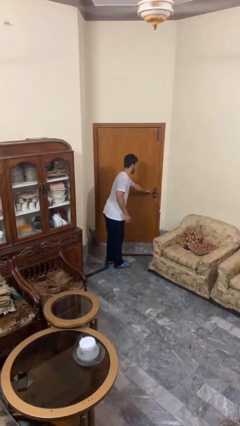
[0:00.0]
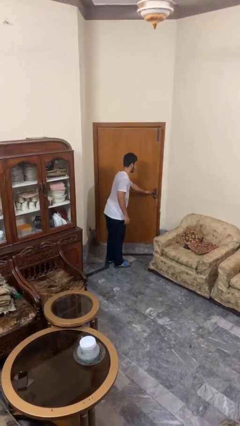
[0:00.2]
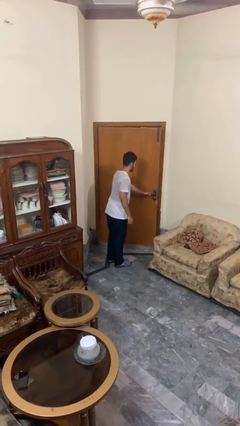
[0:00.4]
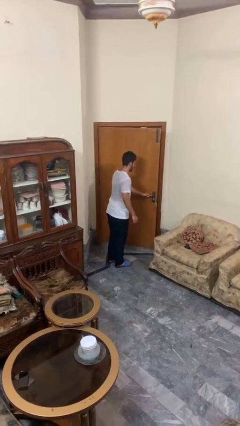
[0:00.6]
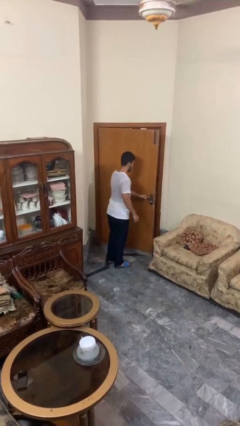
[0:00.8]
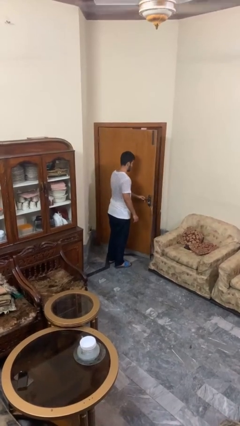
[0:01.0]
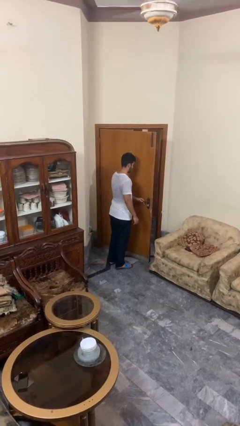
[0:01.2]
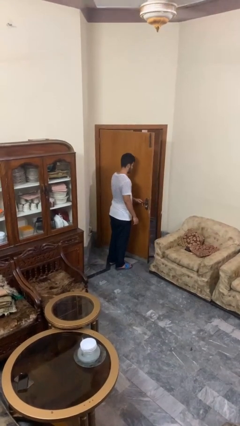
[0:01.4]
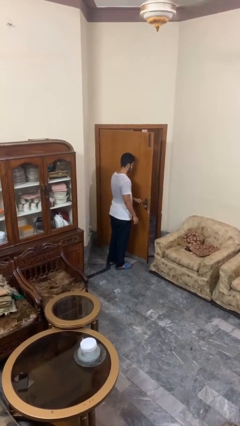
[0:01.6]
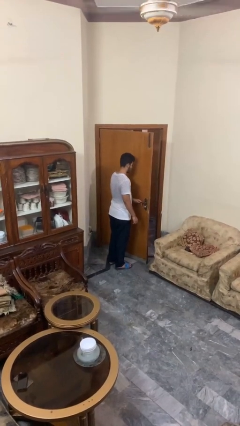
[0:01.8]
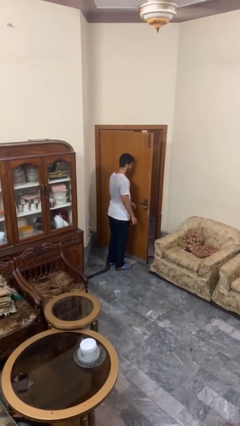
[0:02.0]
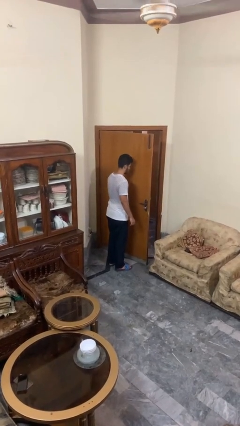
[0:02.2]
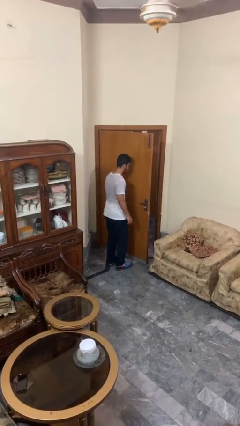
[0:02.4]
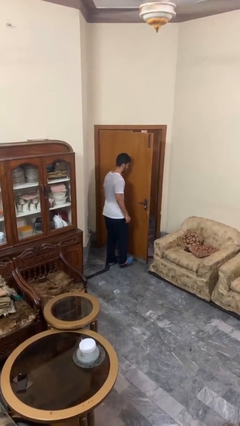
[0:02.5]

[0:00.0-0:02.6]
person opens facility door

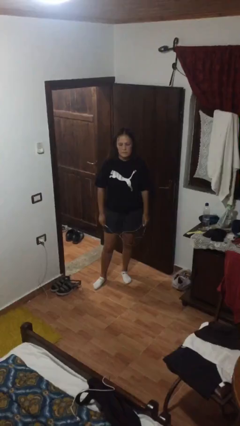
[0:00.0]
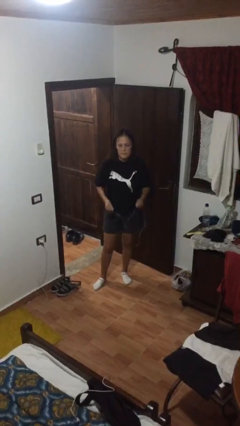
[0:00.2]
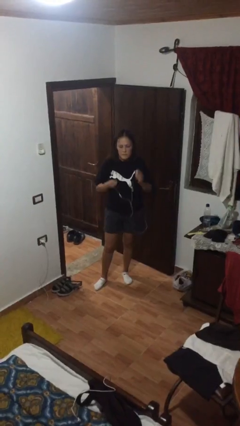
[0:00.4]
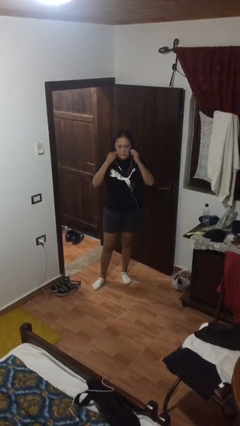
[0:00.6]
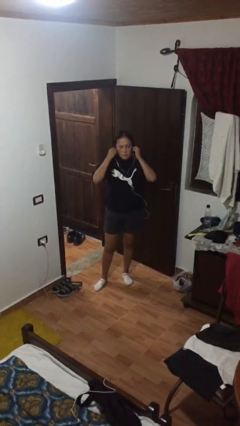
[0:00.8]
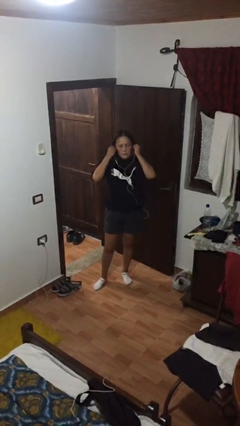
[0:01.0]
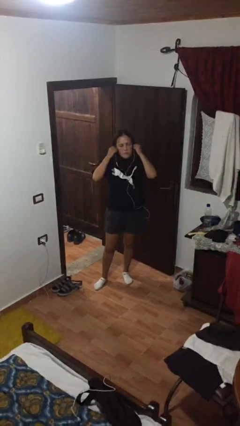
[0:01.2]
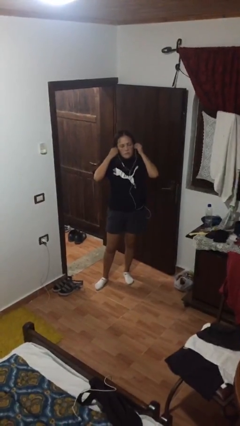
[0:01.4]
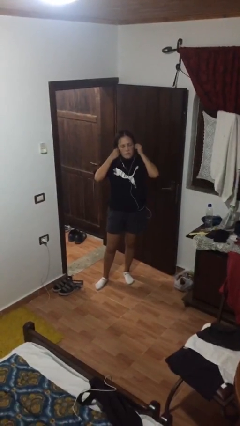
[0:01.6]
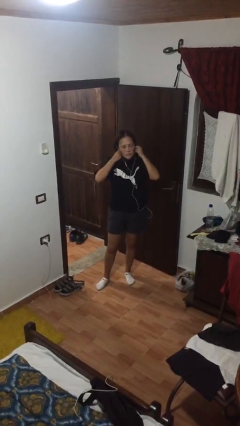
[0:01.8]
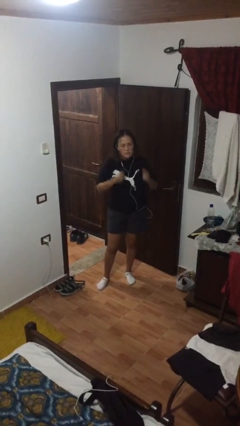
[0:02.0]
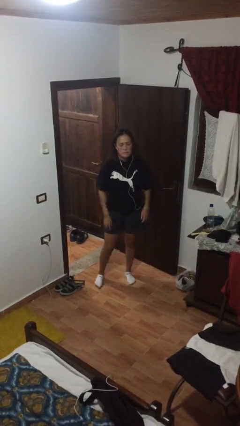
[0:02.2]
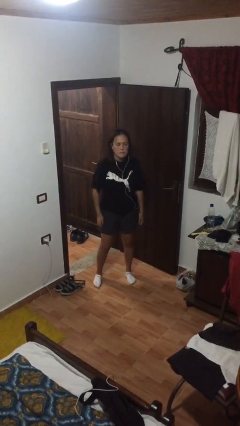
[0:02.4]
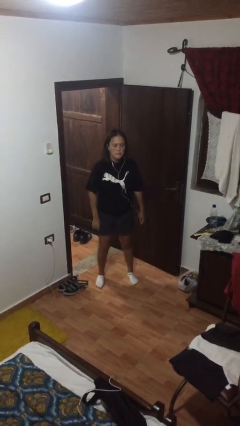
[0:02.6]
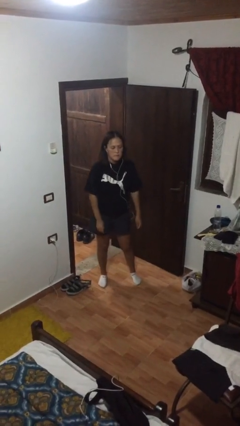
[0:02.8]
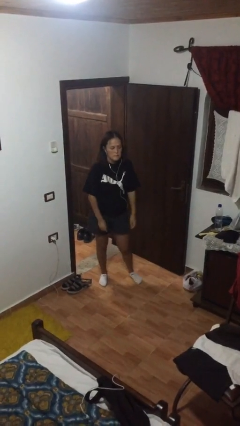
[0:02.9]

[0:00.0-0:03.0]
person puts on headphones

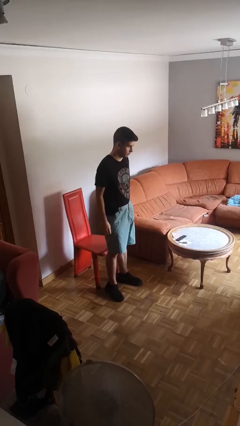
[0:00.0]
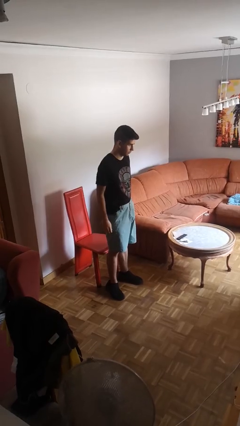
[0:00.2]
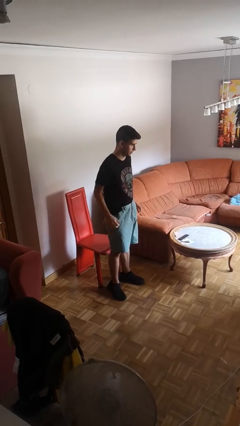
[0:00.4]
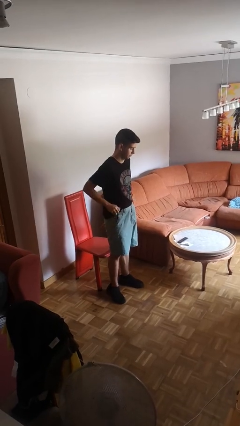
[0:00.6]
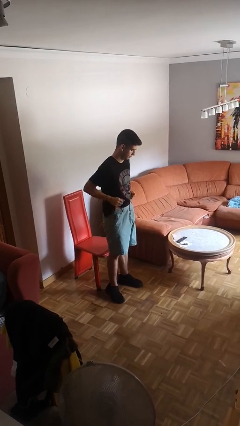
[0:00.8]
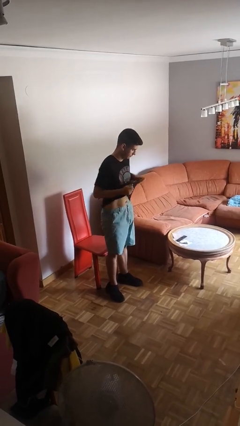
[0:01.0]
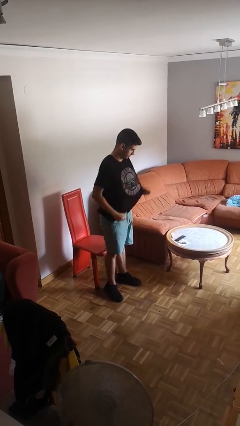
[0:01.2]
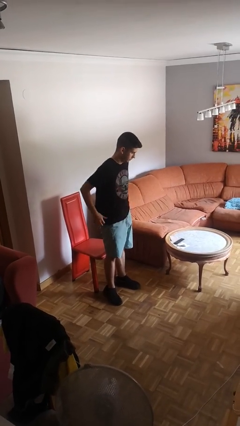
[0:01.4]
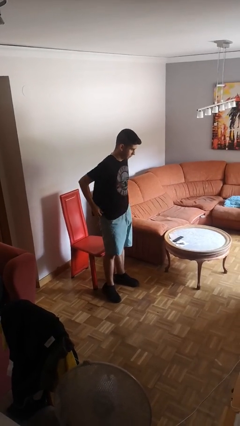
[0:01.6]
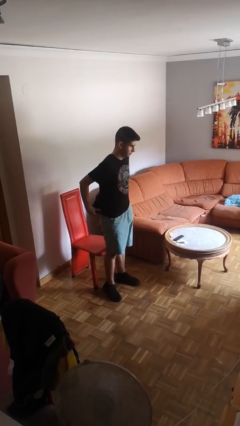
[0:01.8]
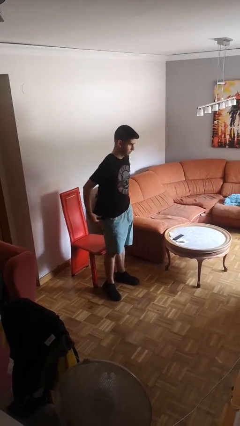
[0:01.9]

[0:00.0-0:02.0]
person untucks shirt

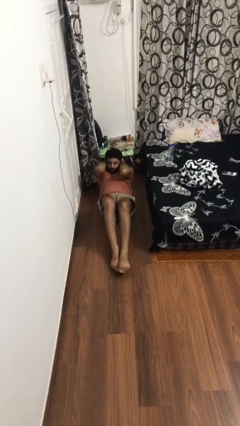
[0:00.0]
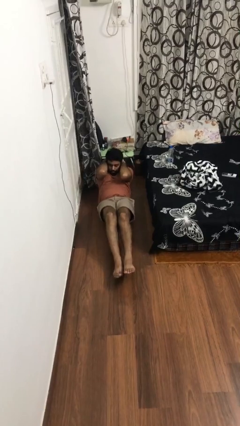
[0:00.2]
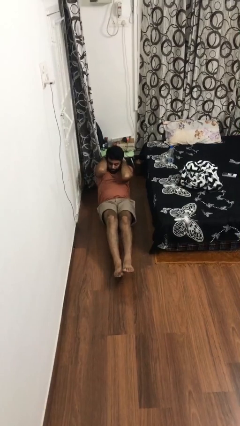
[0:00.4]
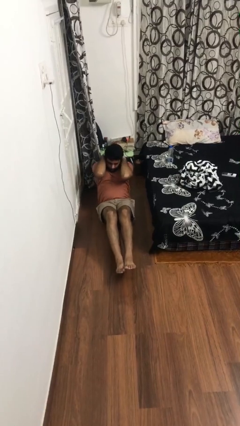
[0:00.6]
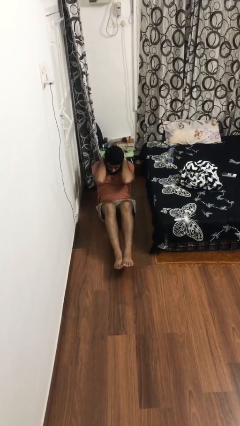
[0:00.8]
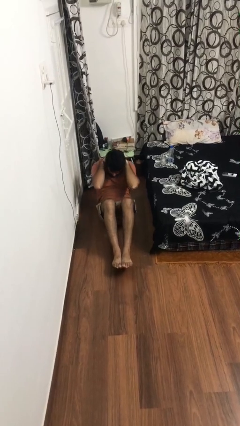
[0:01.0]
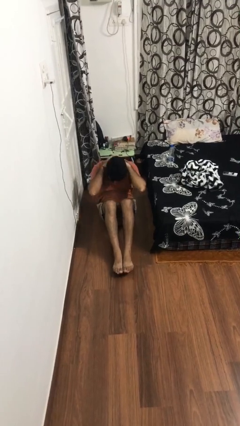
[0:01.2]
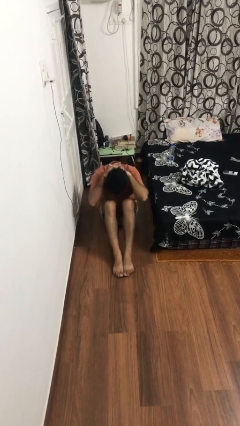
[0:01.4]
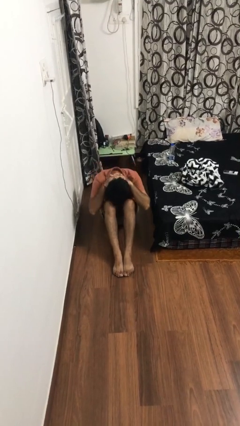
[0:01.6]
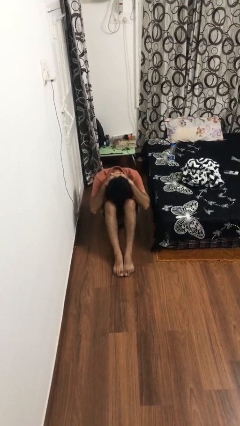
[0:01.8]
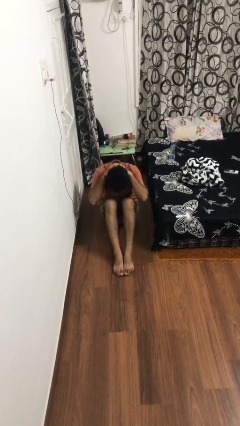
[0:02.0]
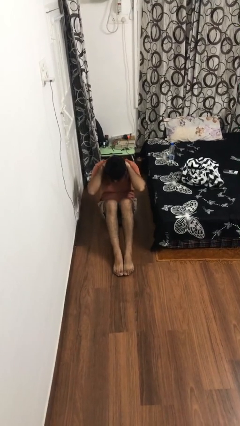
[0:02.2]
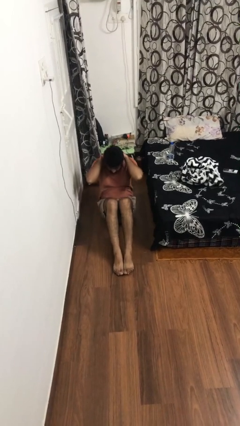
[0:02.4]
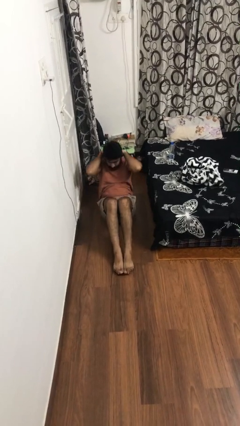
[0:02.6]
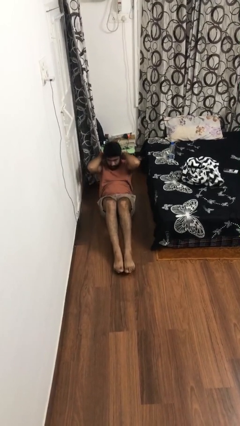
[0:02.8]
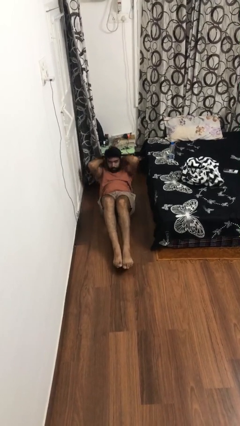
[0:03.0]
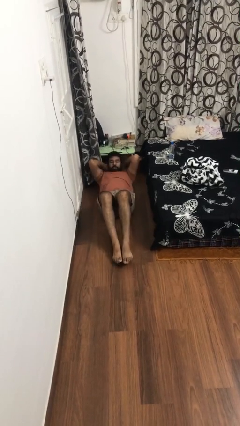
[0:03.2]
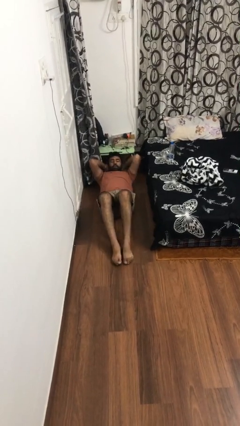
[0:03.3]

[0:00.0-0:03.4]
person exercises with situp

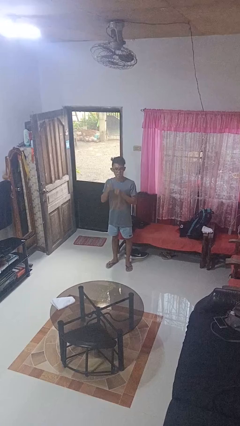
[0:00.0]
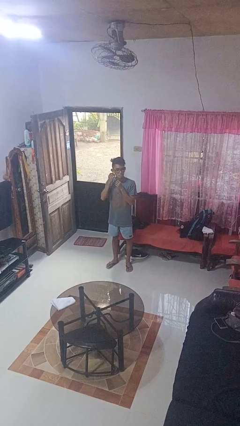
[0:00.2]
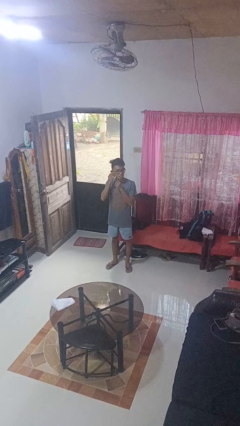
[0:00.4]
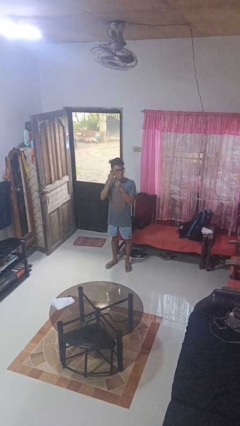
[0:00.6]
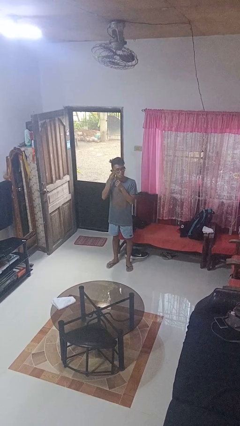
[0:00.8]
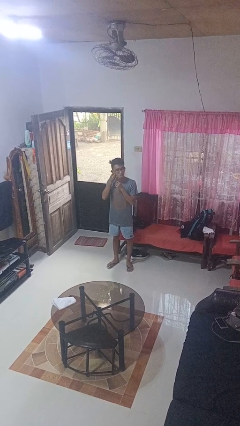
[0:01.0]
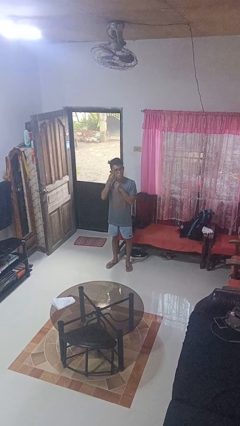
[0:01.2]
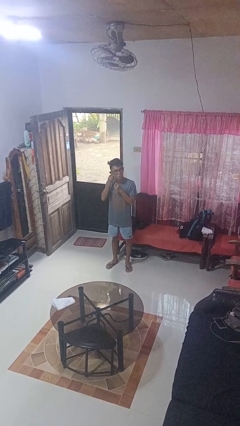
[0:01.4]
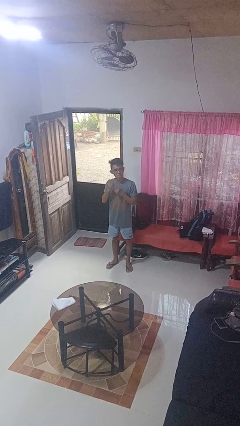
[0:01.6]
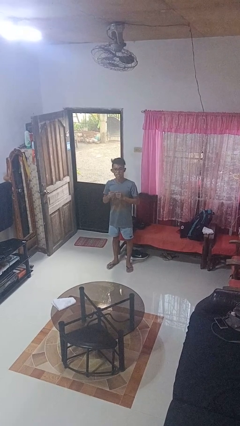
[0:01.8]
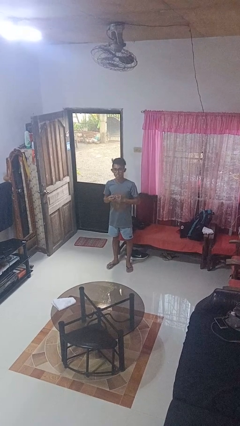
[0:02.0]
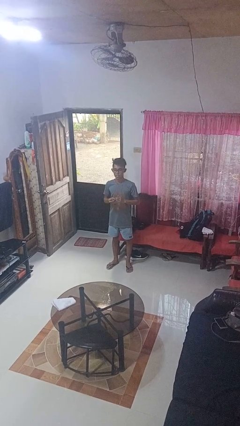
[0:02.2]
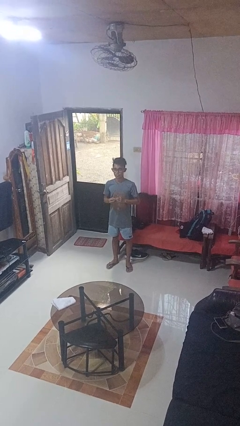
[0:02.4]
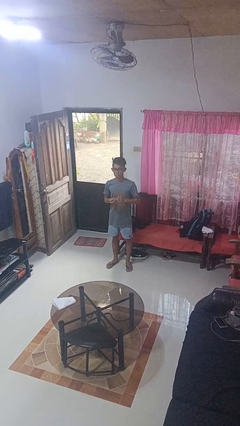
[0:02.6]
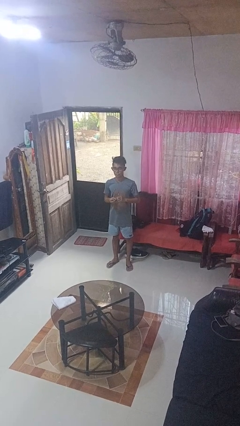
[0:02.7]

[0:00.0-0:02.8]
person takes off earrings

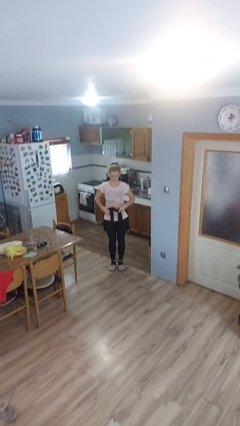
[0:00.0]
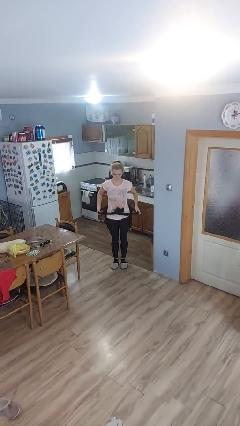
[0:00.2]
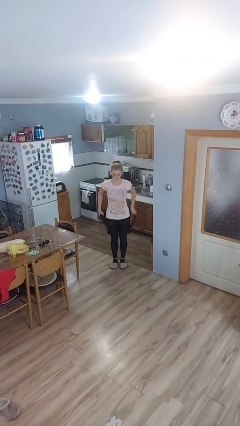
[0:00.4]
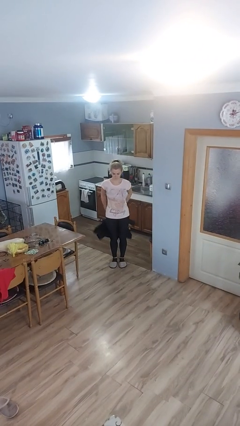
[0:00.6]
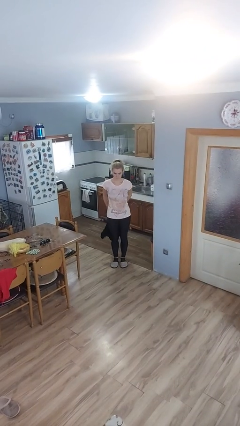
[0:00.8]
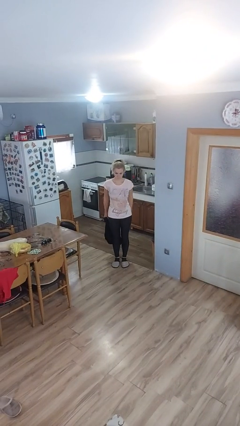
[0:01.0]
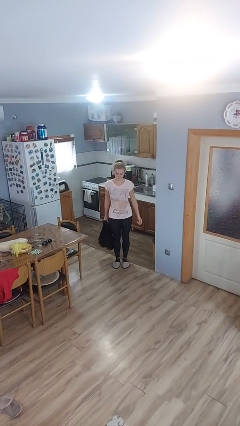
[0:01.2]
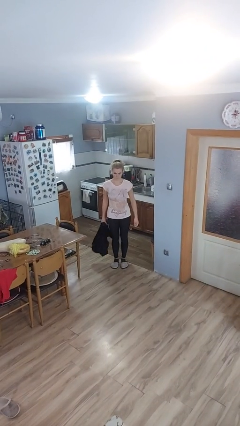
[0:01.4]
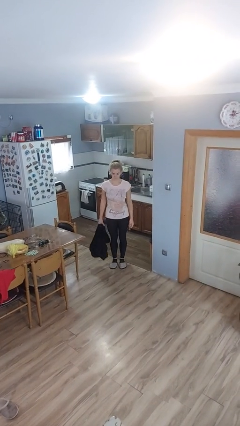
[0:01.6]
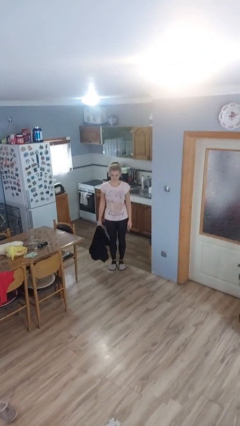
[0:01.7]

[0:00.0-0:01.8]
person unties jacket around waist

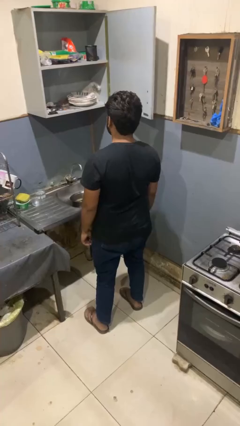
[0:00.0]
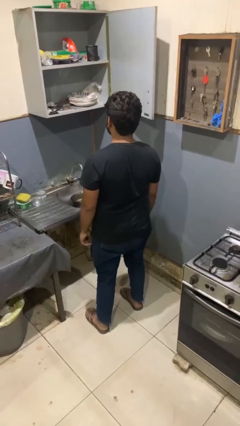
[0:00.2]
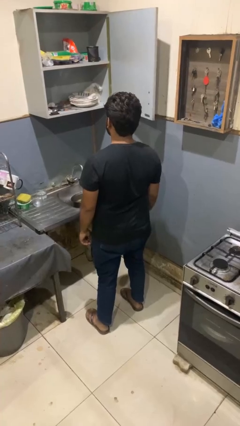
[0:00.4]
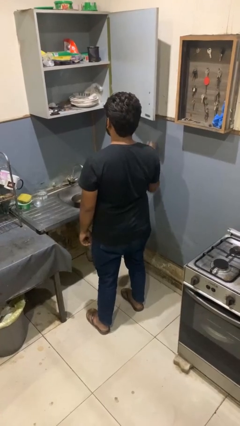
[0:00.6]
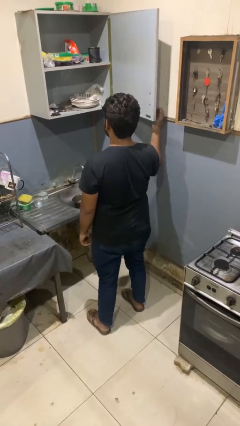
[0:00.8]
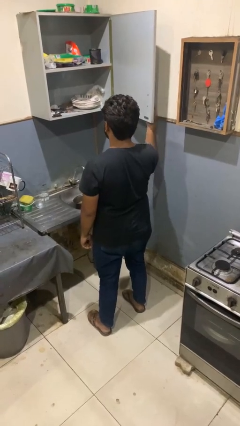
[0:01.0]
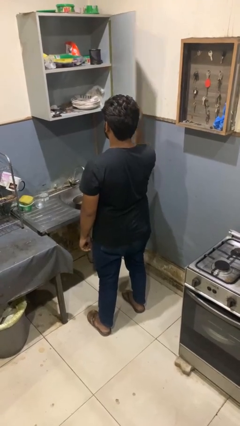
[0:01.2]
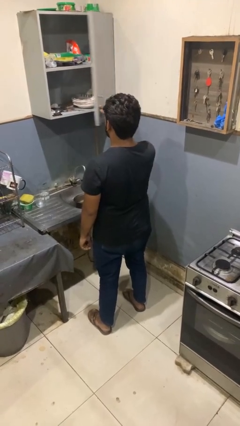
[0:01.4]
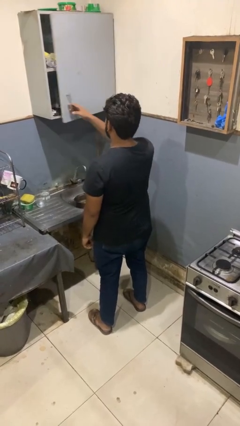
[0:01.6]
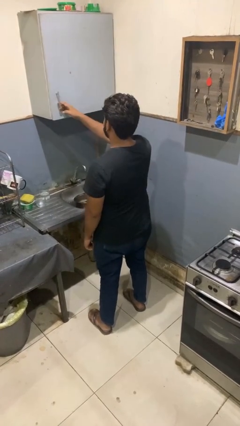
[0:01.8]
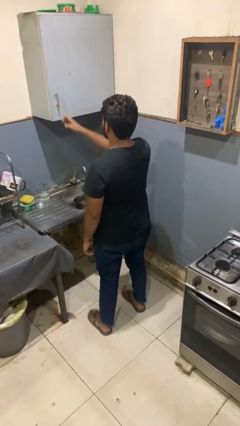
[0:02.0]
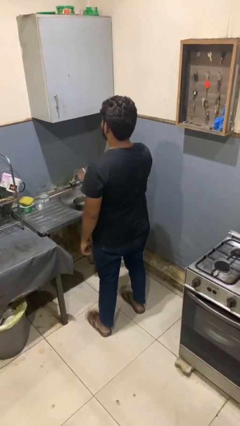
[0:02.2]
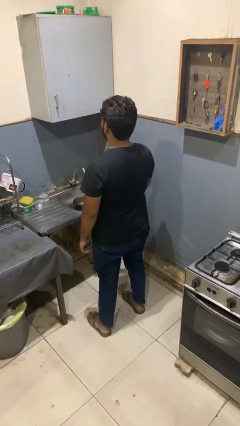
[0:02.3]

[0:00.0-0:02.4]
person closes kitchen drawer
